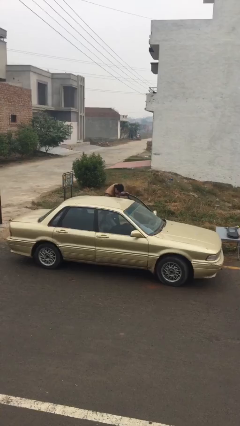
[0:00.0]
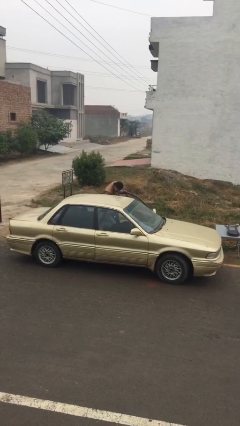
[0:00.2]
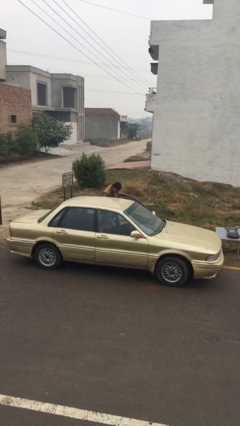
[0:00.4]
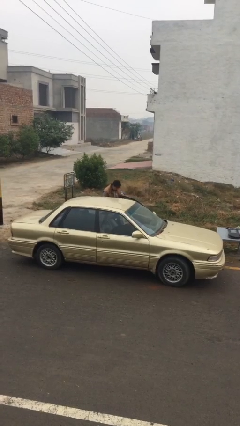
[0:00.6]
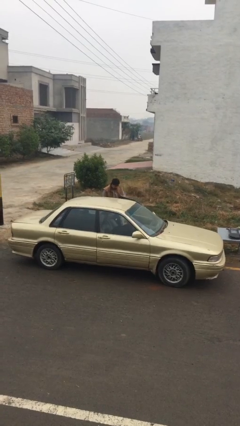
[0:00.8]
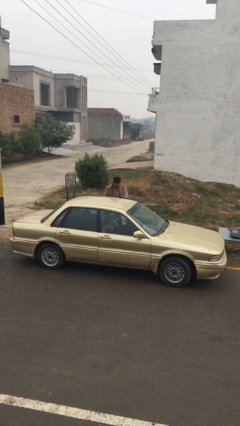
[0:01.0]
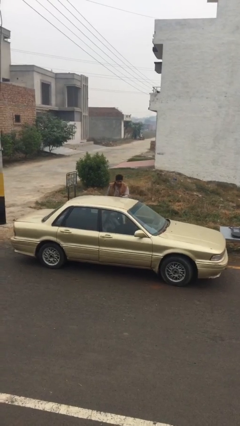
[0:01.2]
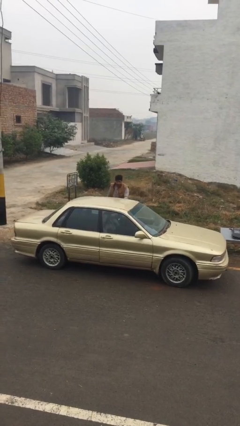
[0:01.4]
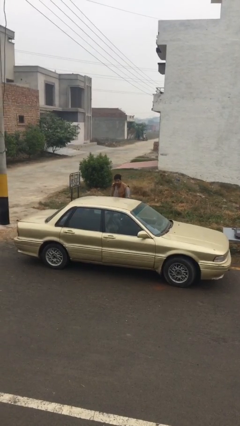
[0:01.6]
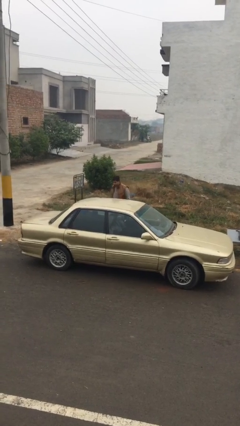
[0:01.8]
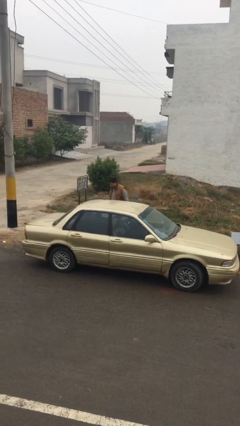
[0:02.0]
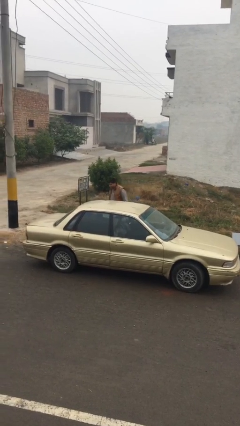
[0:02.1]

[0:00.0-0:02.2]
person closes car door

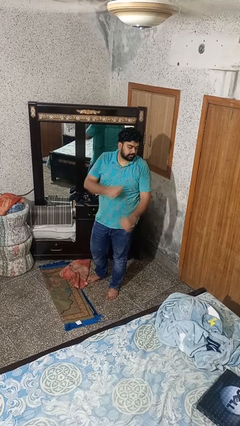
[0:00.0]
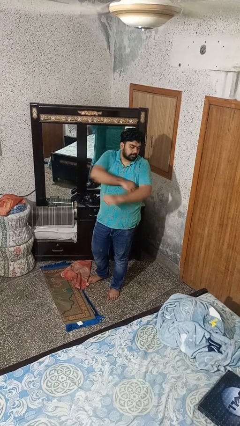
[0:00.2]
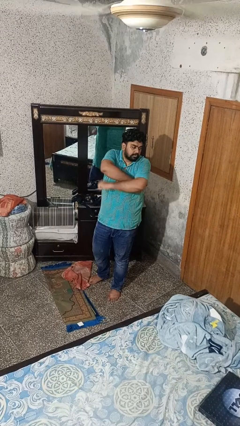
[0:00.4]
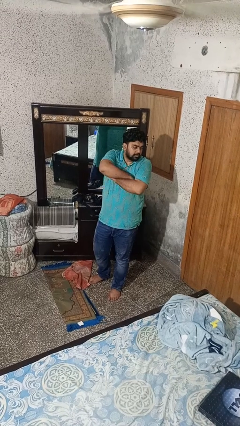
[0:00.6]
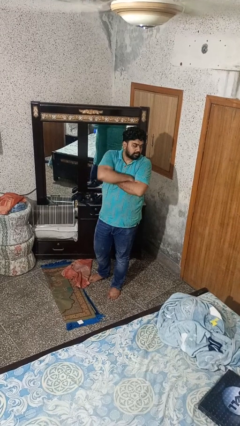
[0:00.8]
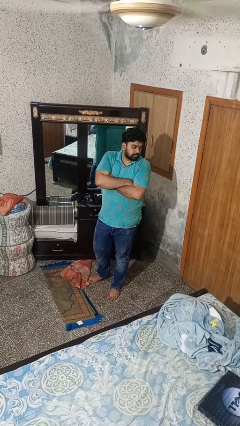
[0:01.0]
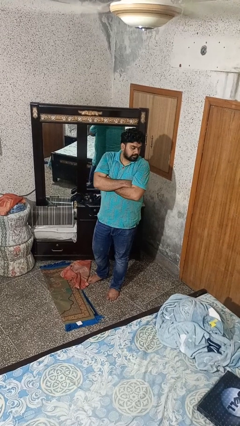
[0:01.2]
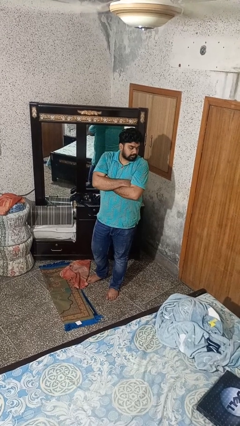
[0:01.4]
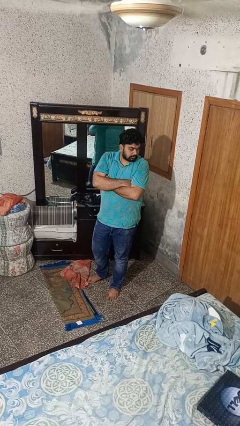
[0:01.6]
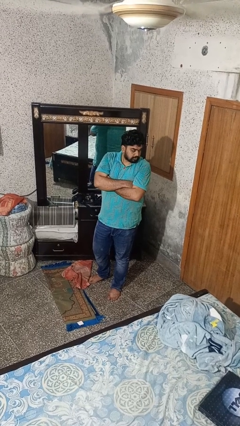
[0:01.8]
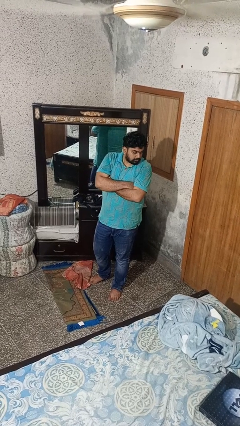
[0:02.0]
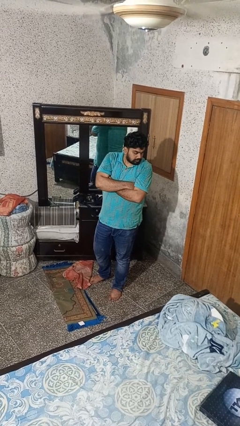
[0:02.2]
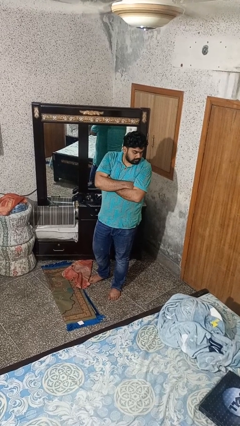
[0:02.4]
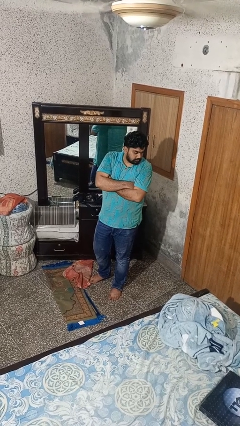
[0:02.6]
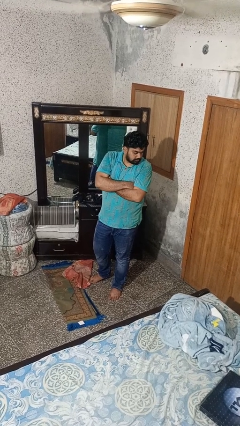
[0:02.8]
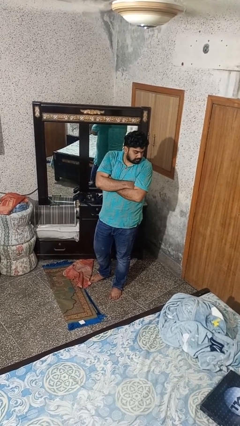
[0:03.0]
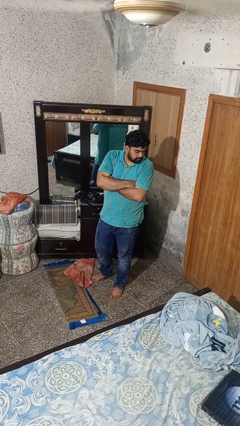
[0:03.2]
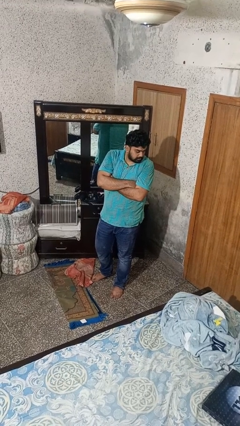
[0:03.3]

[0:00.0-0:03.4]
person crosses arms

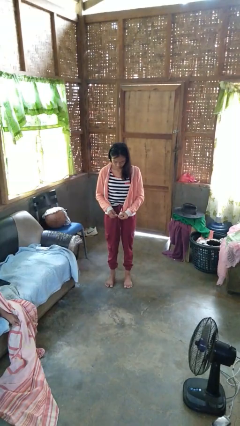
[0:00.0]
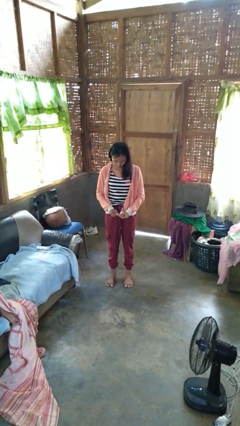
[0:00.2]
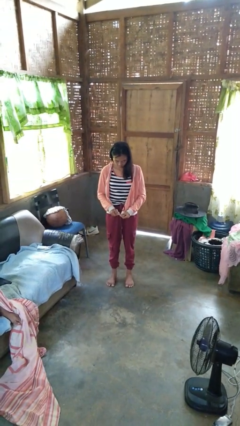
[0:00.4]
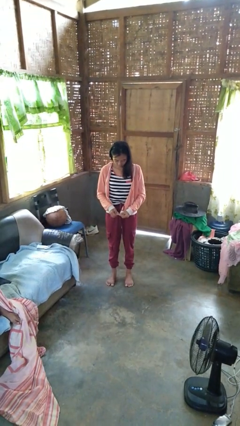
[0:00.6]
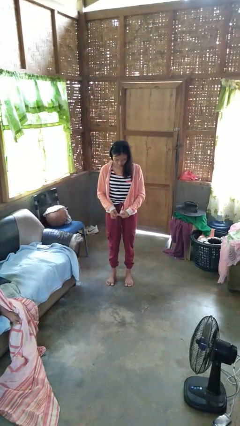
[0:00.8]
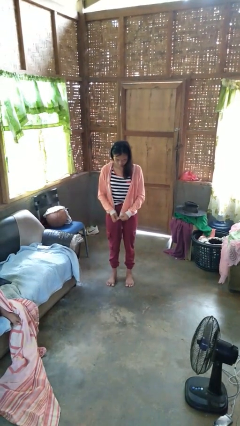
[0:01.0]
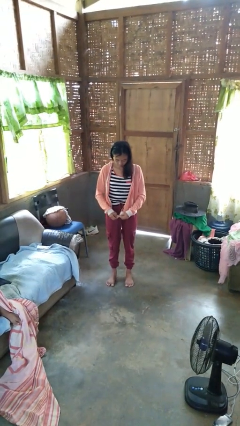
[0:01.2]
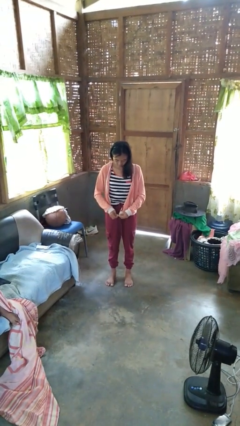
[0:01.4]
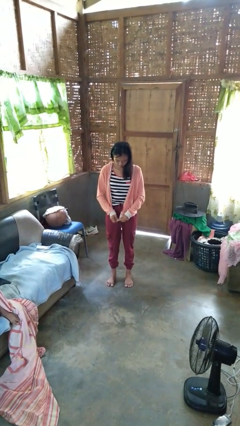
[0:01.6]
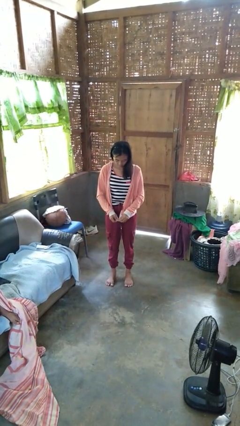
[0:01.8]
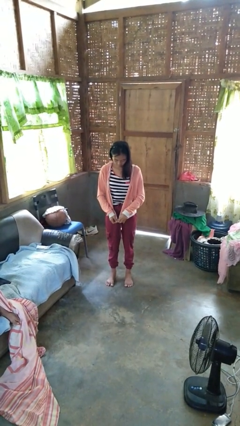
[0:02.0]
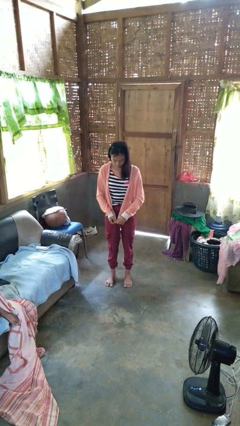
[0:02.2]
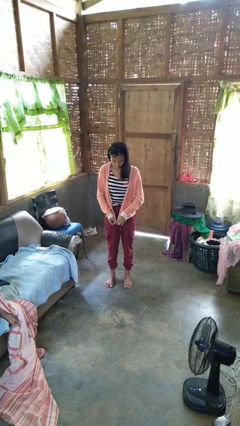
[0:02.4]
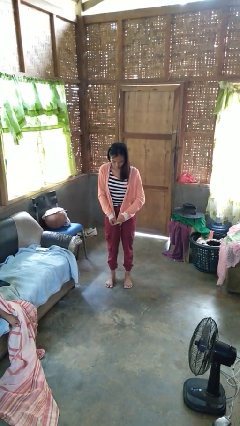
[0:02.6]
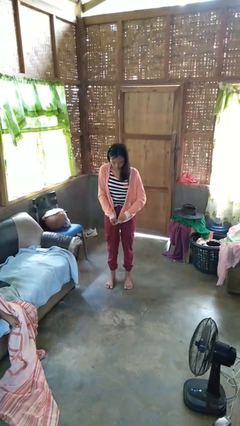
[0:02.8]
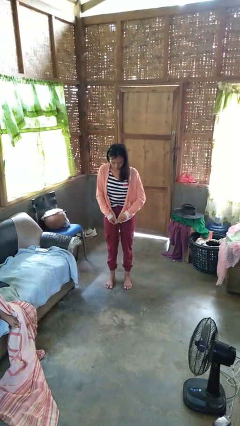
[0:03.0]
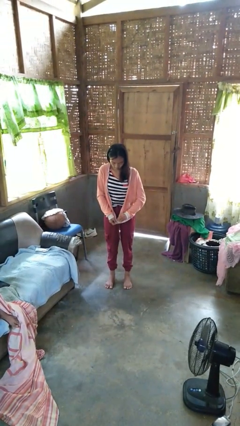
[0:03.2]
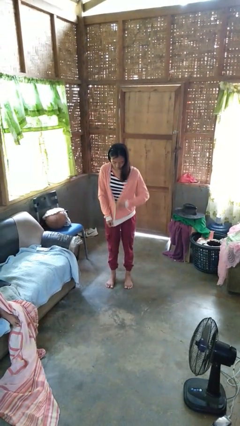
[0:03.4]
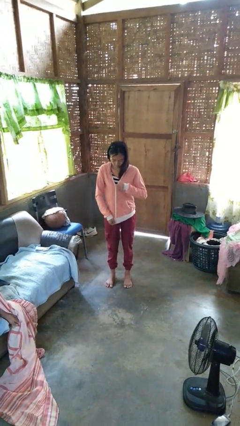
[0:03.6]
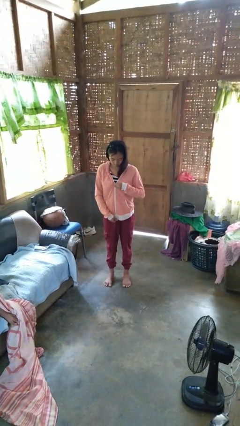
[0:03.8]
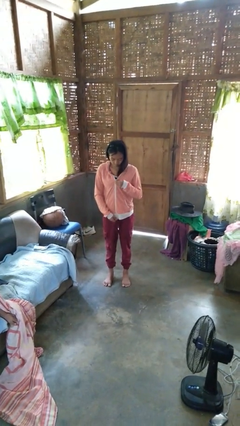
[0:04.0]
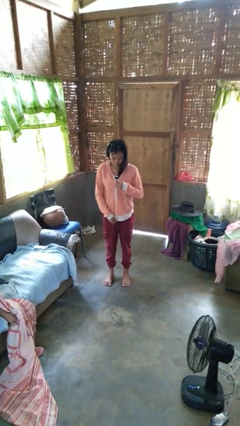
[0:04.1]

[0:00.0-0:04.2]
person zips up jacket

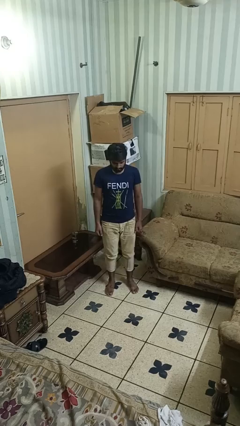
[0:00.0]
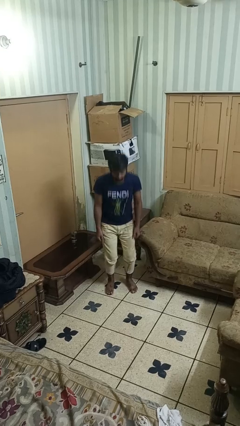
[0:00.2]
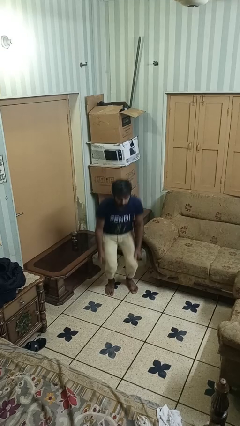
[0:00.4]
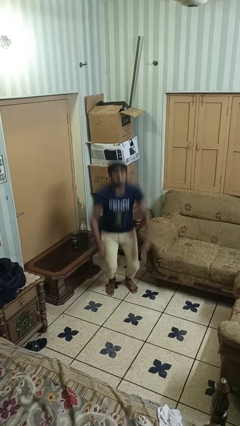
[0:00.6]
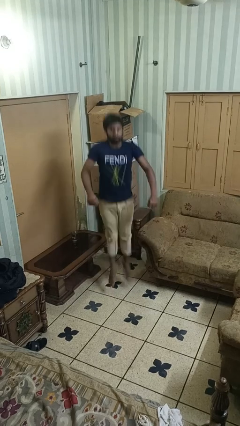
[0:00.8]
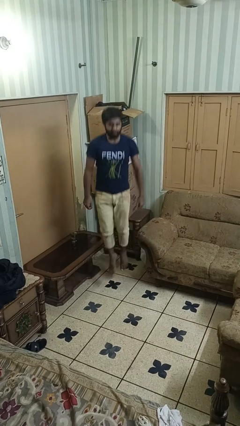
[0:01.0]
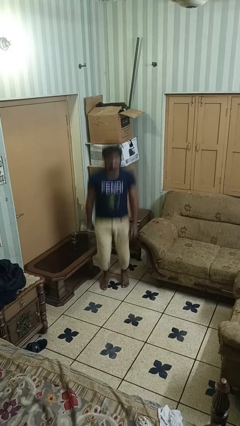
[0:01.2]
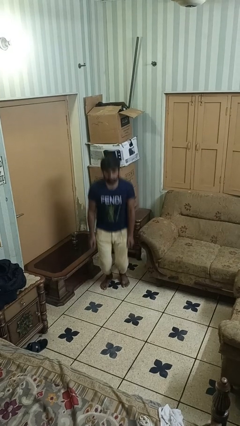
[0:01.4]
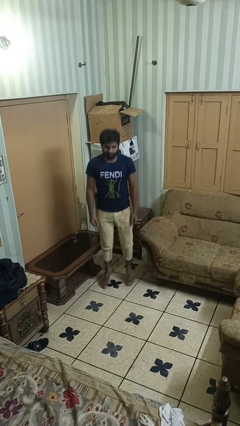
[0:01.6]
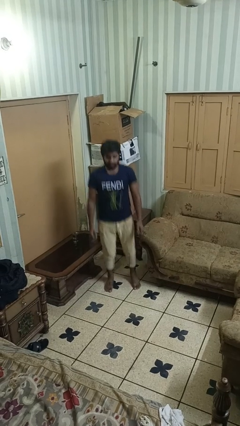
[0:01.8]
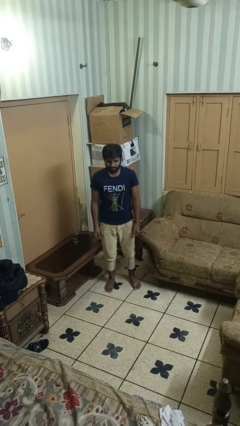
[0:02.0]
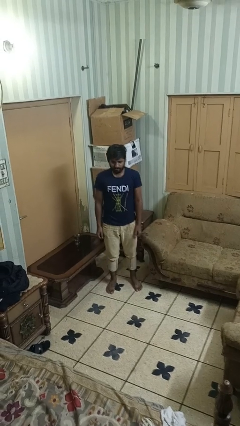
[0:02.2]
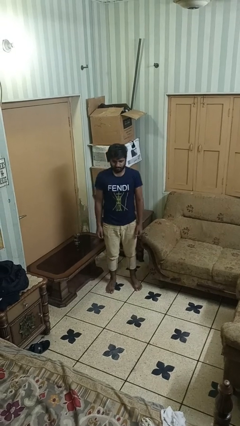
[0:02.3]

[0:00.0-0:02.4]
person jumps

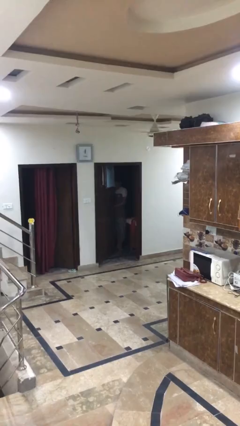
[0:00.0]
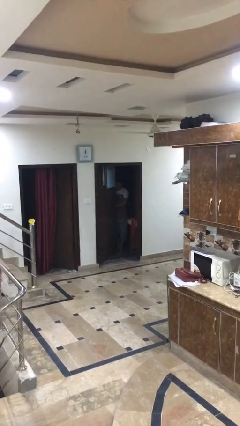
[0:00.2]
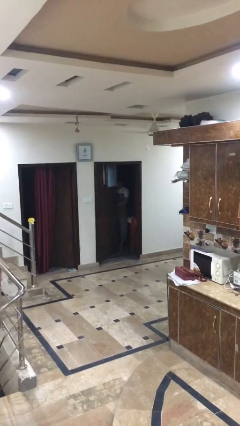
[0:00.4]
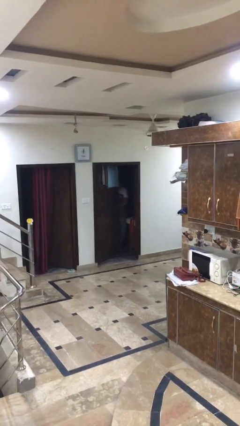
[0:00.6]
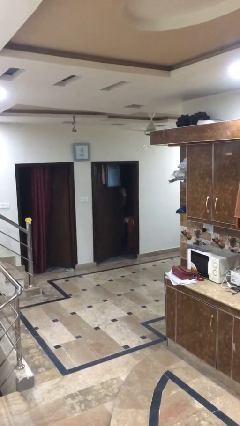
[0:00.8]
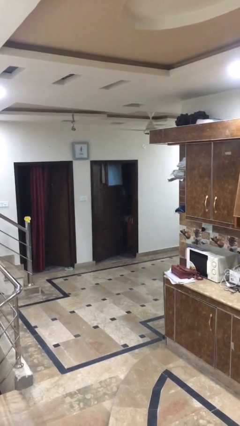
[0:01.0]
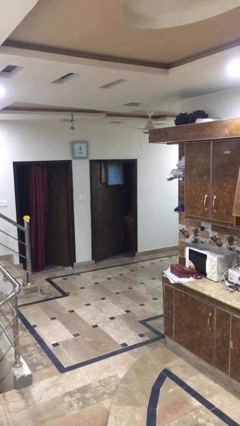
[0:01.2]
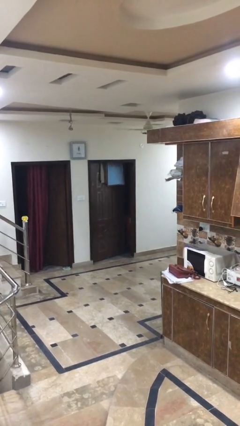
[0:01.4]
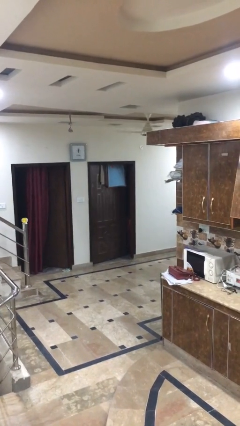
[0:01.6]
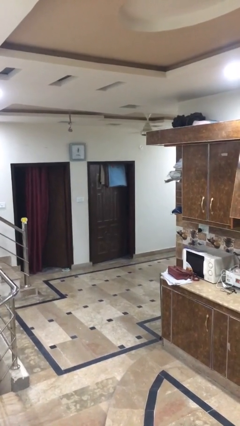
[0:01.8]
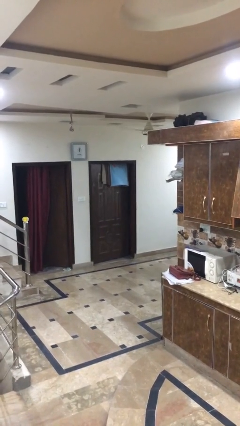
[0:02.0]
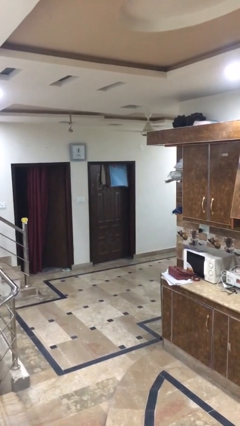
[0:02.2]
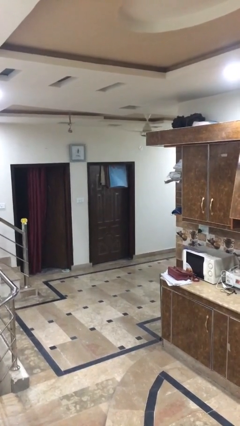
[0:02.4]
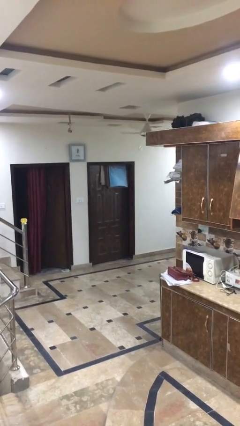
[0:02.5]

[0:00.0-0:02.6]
person closes facility door

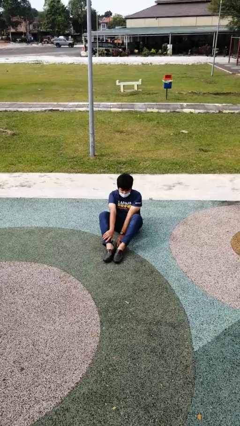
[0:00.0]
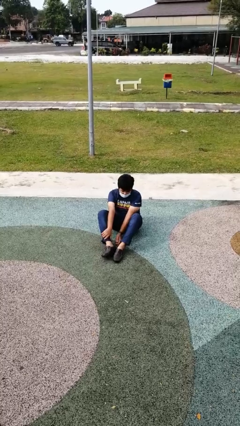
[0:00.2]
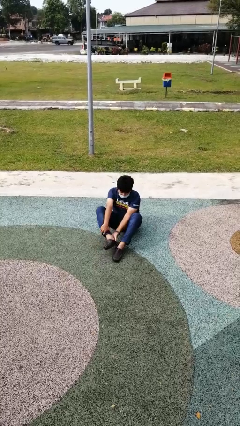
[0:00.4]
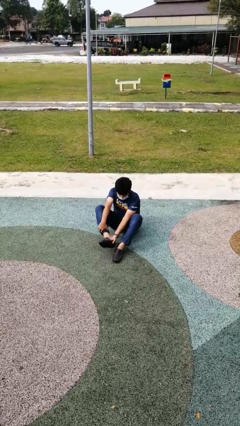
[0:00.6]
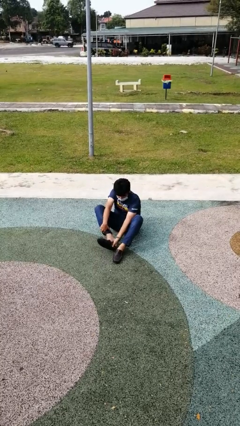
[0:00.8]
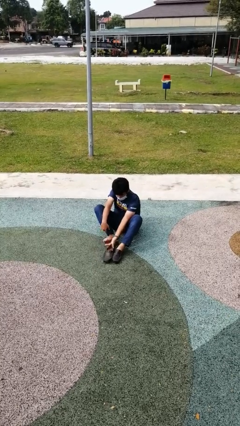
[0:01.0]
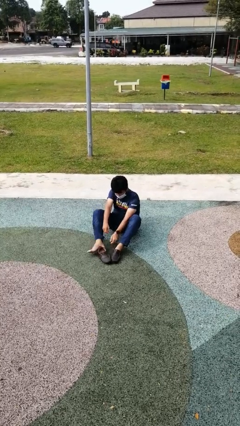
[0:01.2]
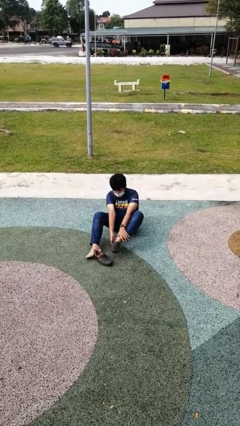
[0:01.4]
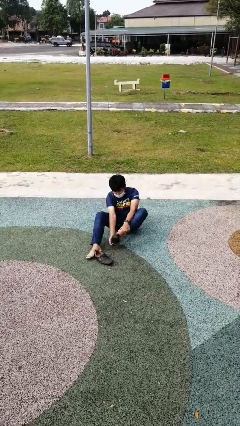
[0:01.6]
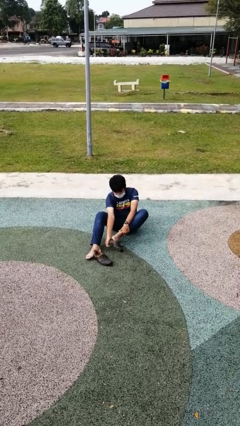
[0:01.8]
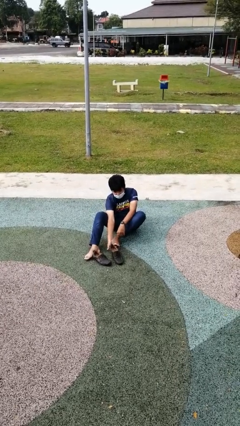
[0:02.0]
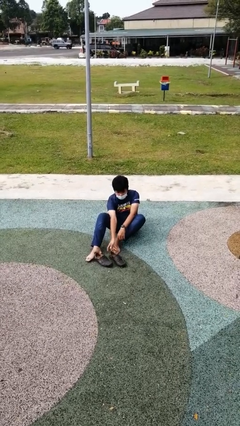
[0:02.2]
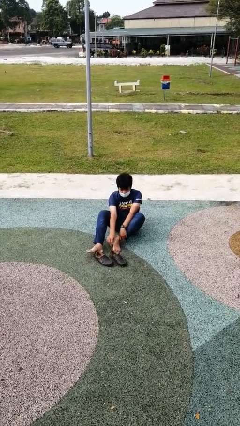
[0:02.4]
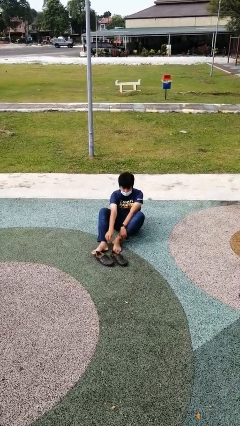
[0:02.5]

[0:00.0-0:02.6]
person takes off shoes
